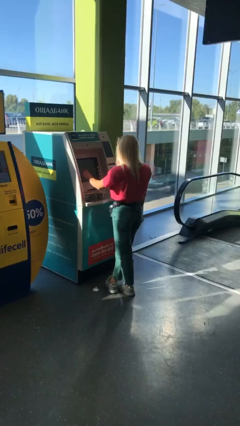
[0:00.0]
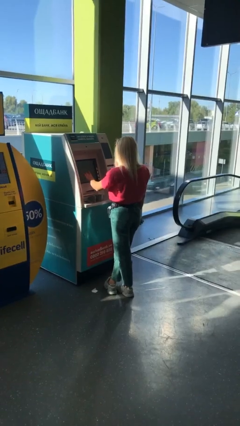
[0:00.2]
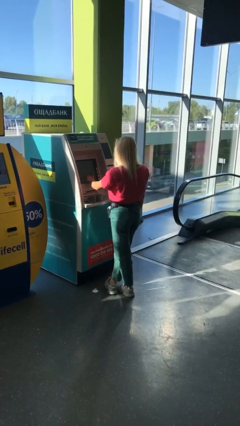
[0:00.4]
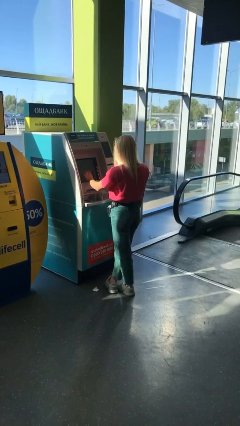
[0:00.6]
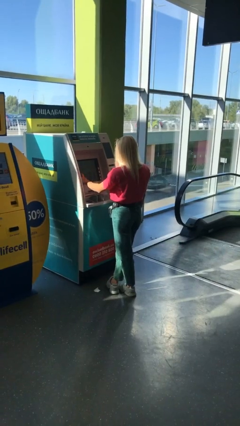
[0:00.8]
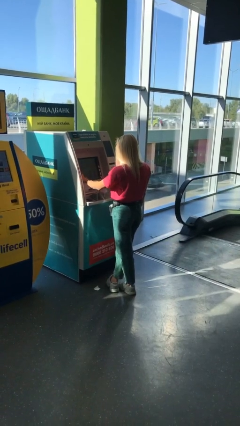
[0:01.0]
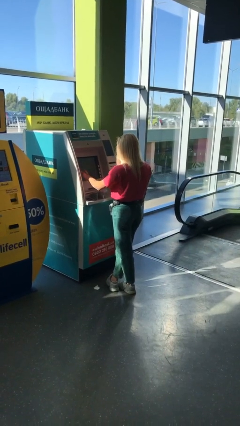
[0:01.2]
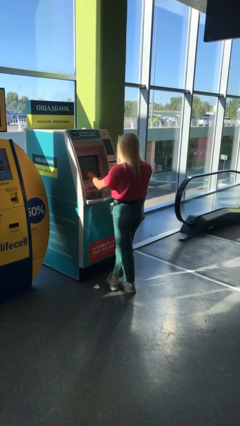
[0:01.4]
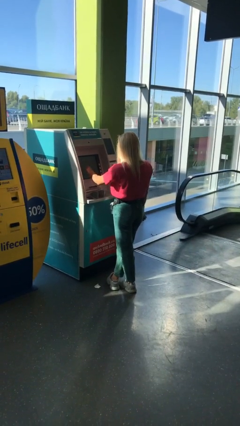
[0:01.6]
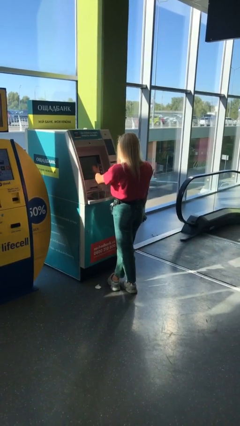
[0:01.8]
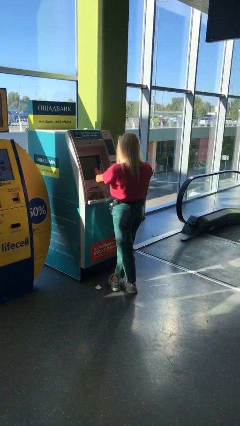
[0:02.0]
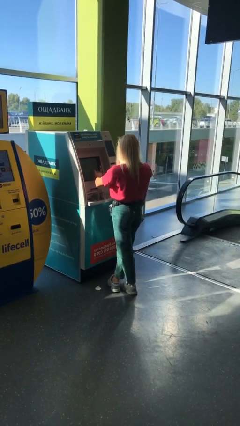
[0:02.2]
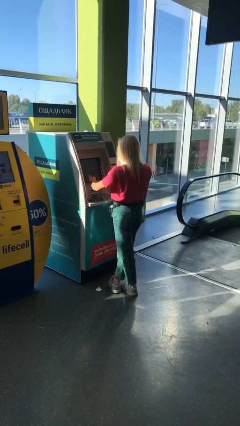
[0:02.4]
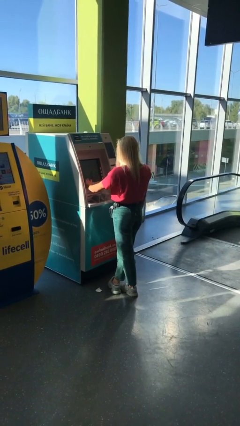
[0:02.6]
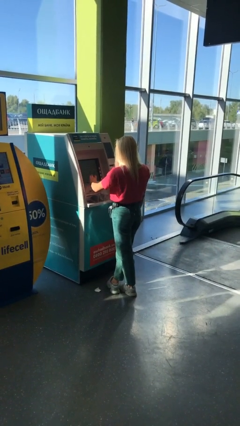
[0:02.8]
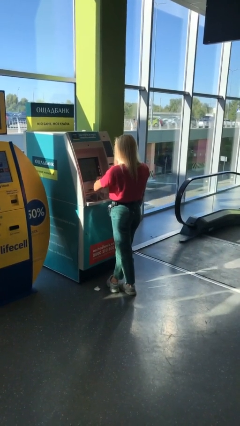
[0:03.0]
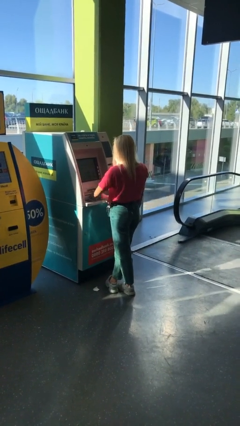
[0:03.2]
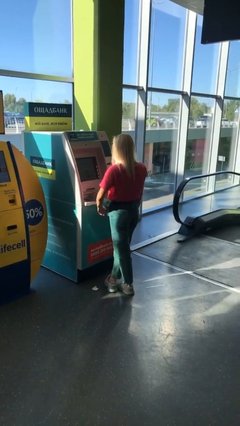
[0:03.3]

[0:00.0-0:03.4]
person purchases from machine

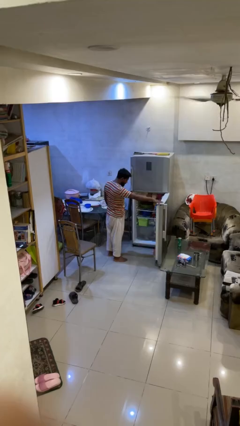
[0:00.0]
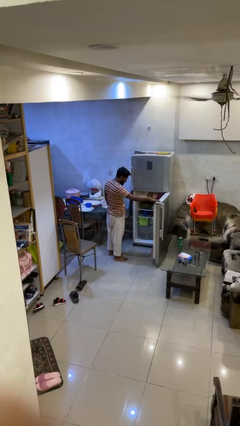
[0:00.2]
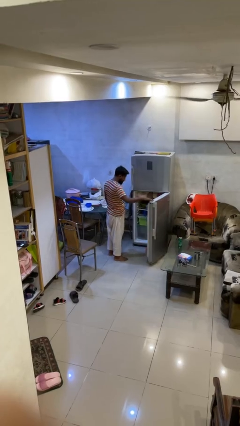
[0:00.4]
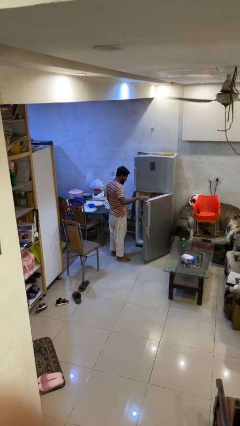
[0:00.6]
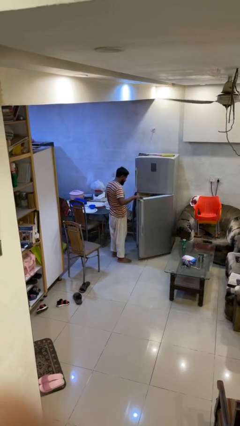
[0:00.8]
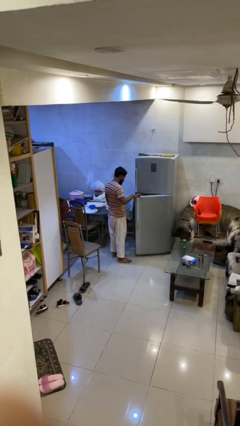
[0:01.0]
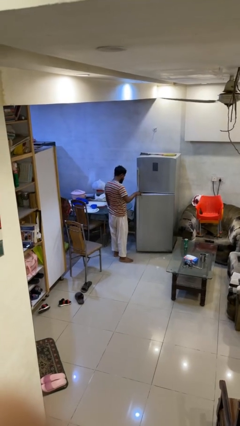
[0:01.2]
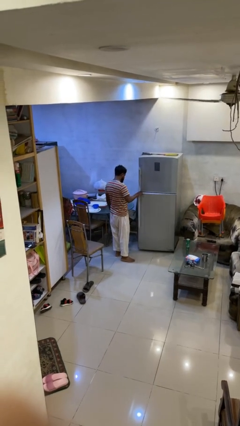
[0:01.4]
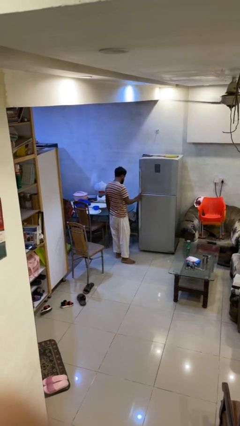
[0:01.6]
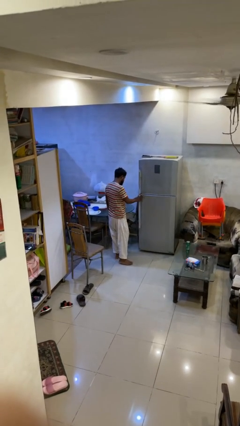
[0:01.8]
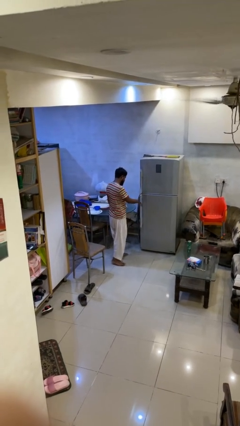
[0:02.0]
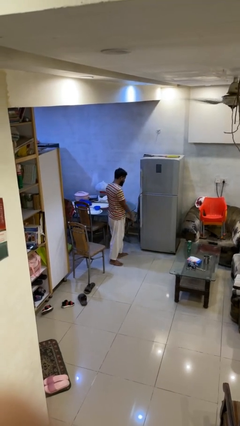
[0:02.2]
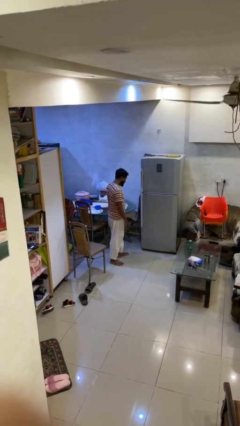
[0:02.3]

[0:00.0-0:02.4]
person closes refrigerator

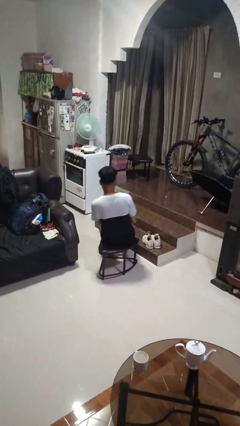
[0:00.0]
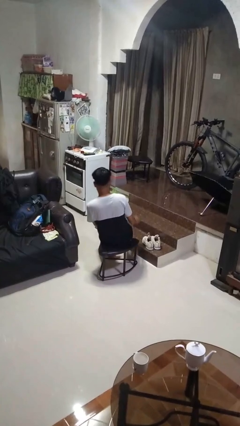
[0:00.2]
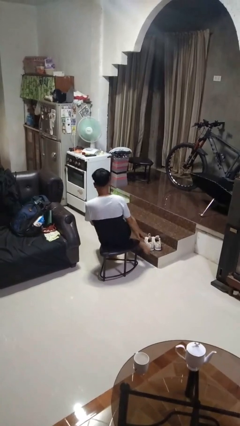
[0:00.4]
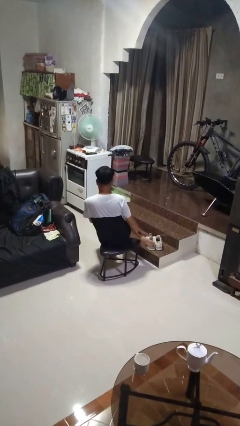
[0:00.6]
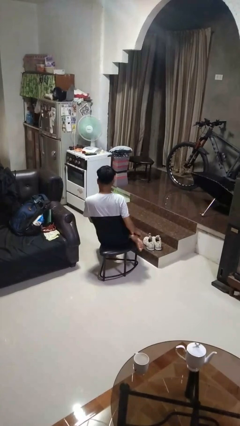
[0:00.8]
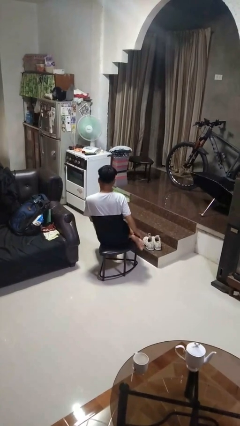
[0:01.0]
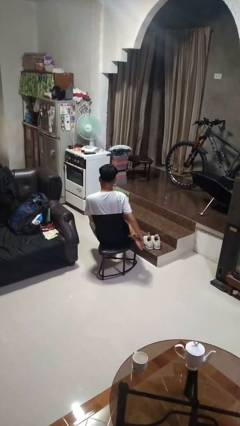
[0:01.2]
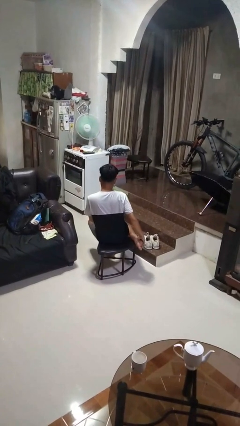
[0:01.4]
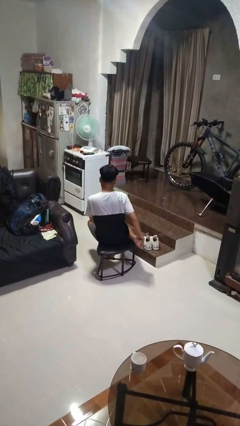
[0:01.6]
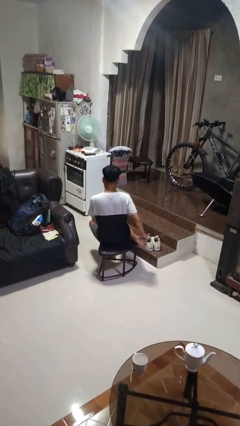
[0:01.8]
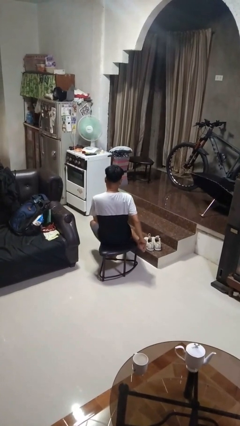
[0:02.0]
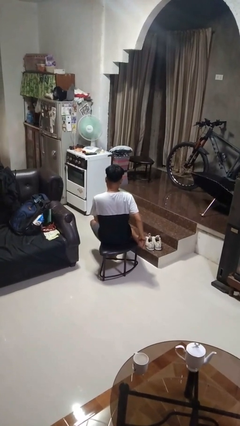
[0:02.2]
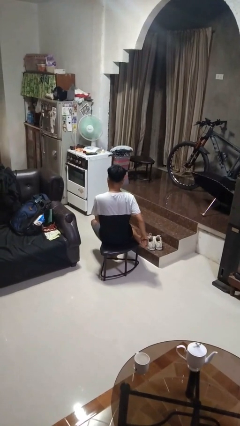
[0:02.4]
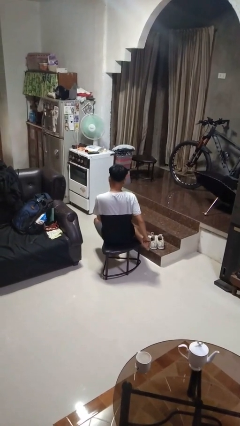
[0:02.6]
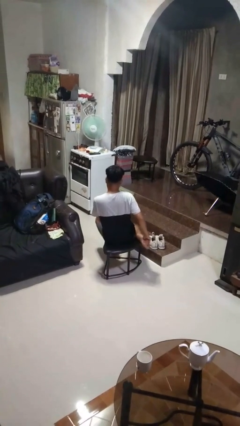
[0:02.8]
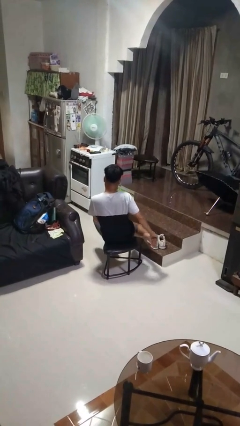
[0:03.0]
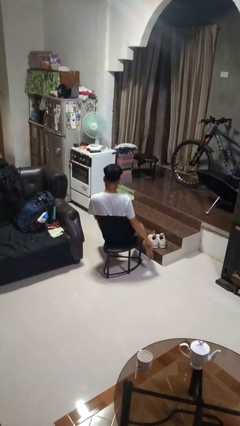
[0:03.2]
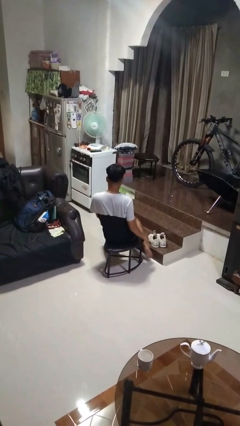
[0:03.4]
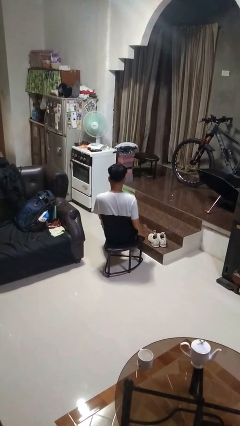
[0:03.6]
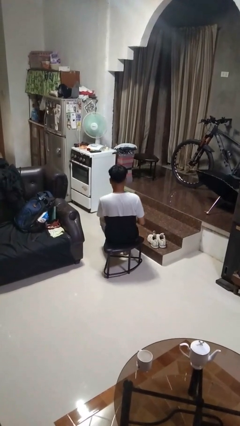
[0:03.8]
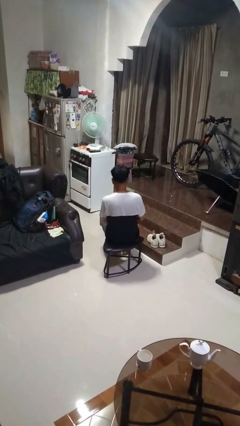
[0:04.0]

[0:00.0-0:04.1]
person rubs foot

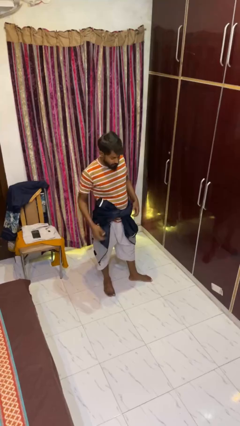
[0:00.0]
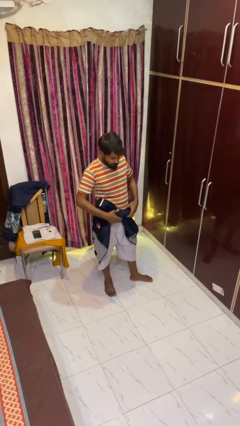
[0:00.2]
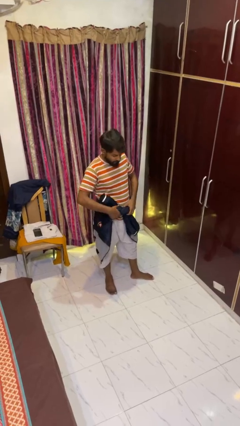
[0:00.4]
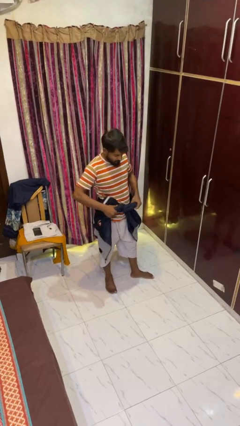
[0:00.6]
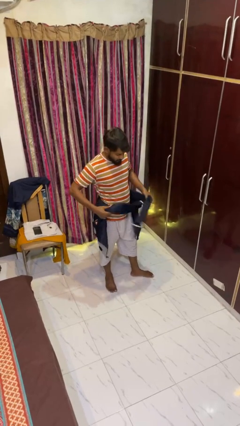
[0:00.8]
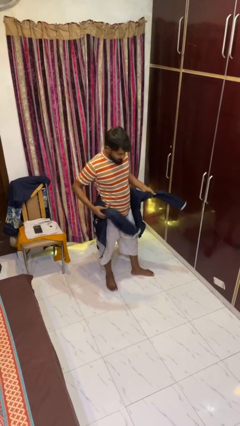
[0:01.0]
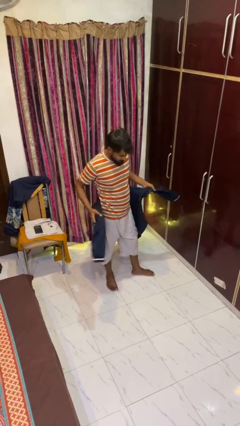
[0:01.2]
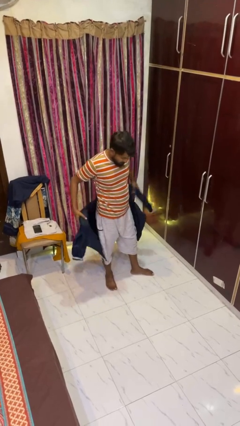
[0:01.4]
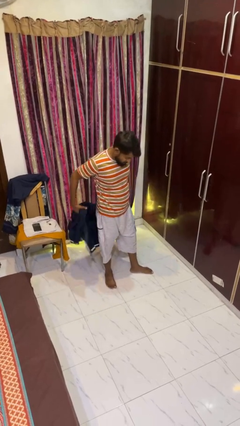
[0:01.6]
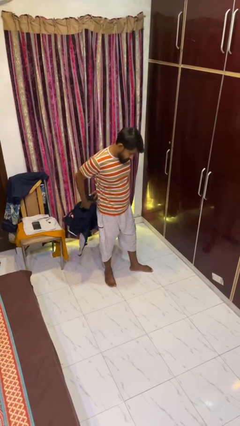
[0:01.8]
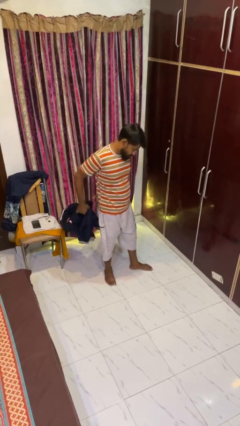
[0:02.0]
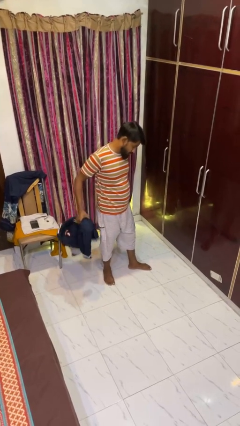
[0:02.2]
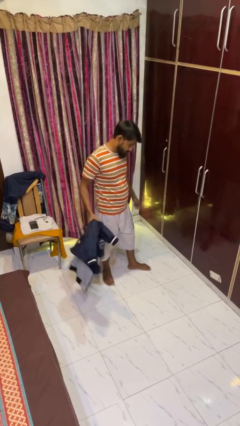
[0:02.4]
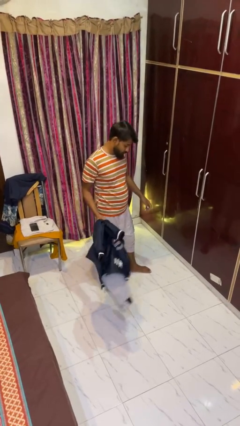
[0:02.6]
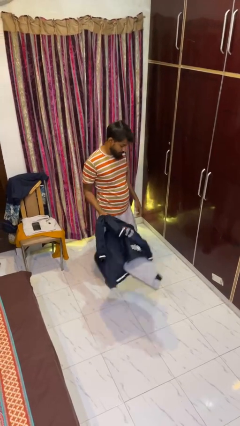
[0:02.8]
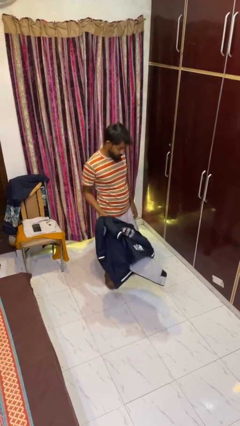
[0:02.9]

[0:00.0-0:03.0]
person unties jacket around waist

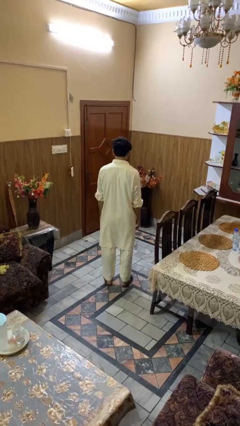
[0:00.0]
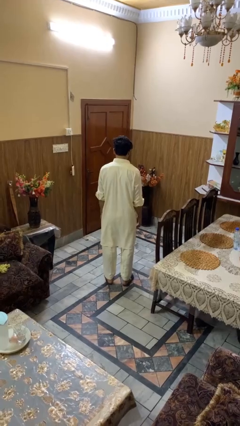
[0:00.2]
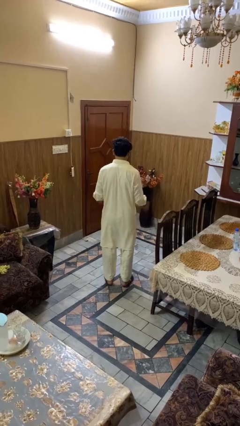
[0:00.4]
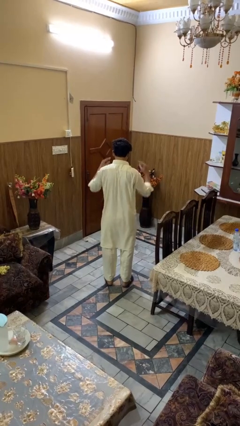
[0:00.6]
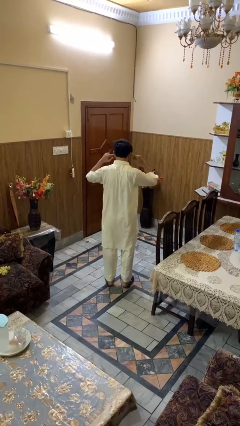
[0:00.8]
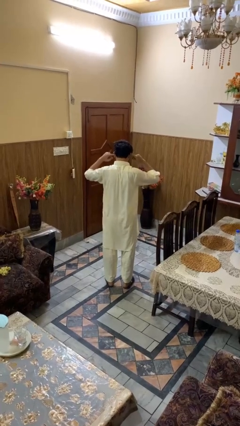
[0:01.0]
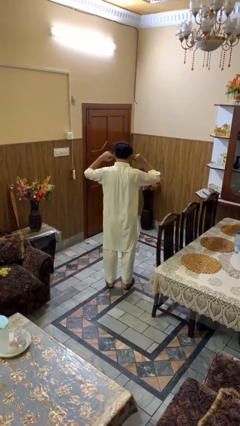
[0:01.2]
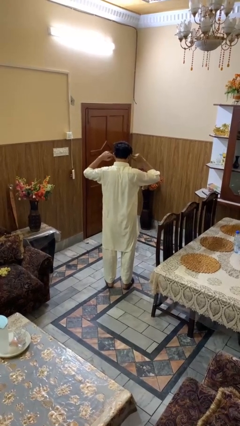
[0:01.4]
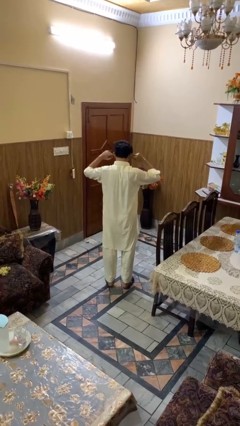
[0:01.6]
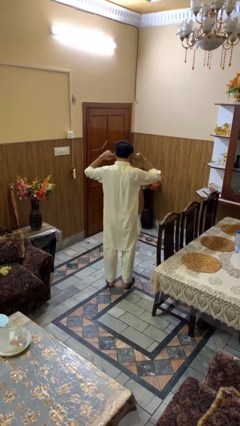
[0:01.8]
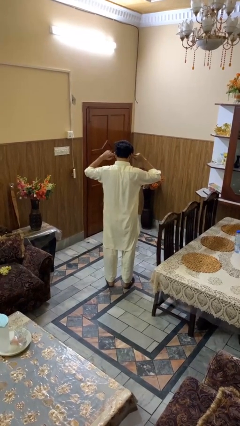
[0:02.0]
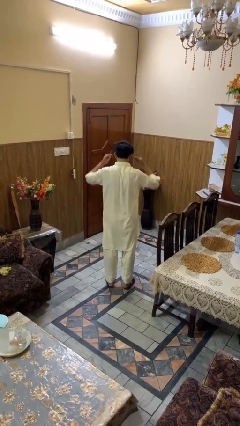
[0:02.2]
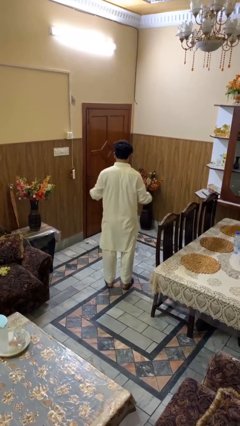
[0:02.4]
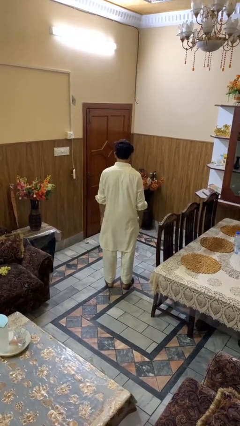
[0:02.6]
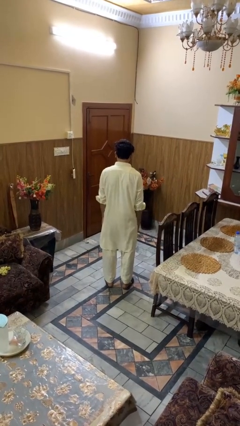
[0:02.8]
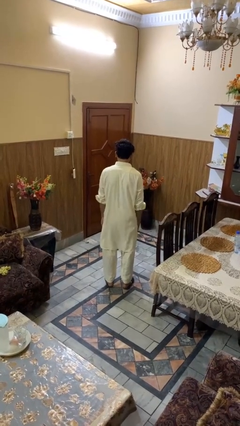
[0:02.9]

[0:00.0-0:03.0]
person puts fingers in ear

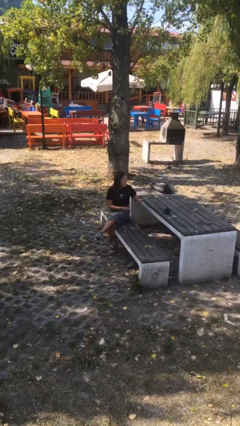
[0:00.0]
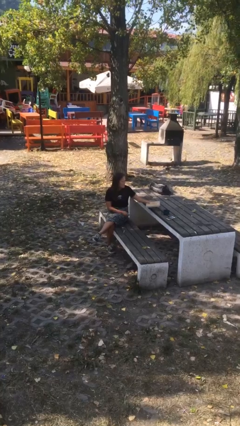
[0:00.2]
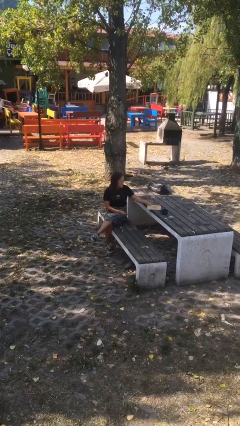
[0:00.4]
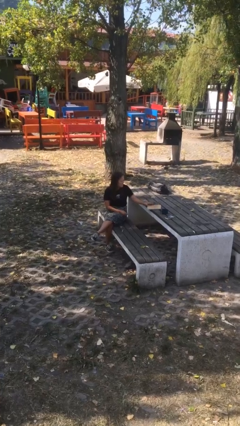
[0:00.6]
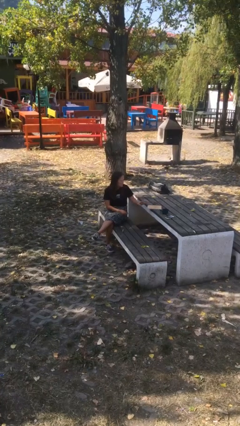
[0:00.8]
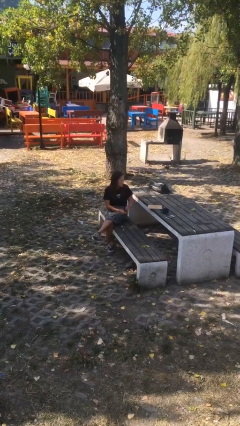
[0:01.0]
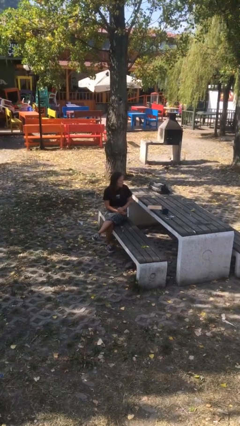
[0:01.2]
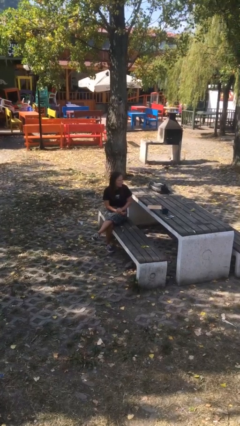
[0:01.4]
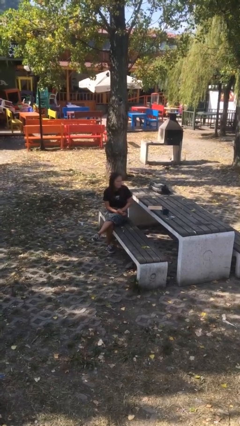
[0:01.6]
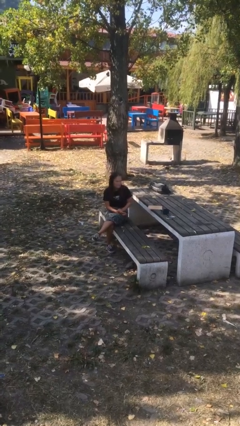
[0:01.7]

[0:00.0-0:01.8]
person puts down object on table
